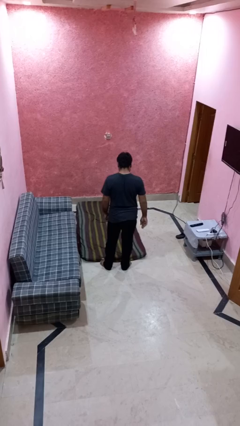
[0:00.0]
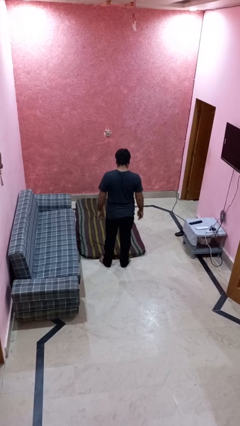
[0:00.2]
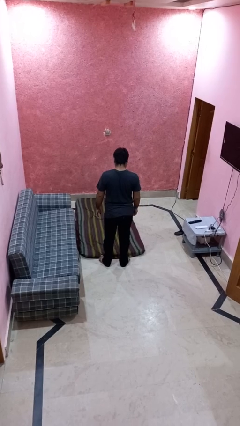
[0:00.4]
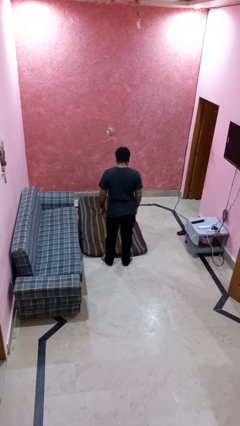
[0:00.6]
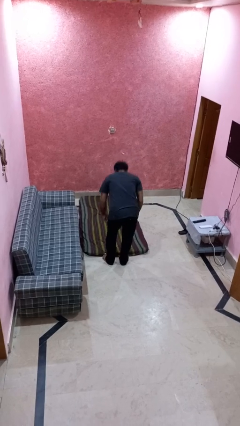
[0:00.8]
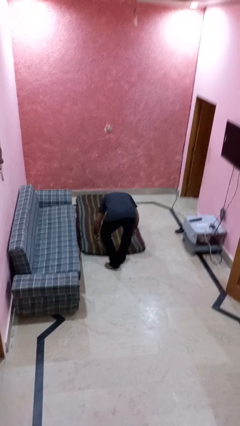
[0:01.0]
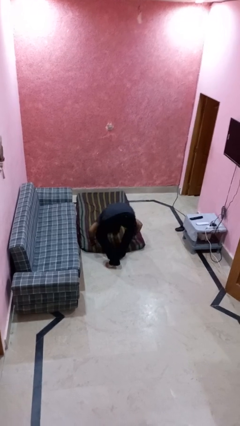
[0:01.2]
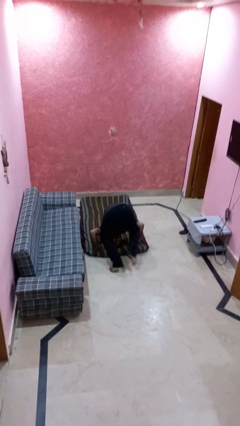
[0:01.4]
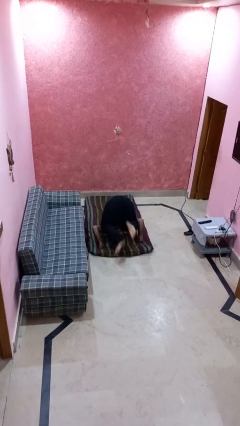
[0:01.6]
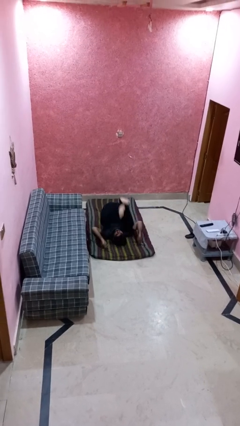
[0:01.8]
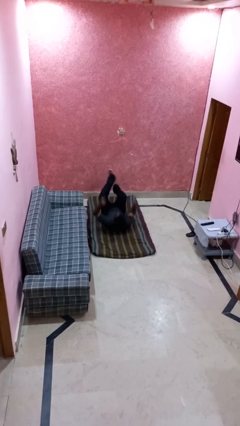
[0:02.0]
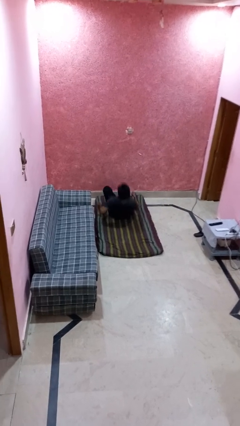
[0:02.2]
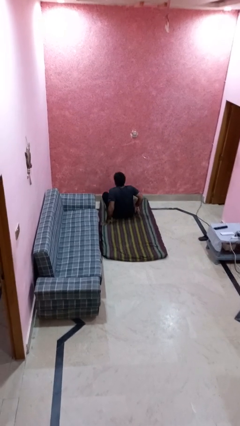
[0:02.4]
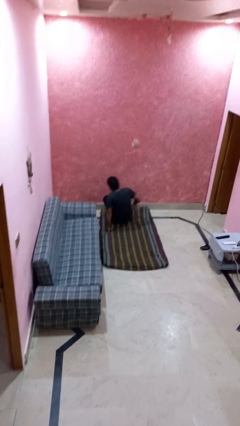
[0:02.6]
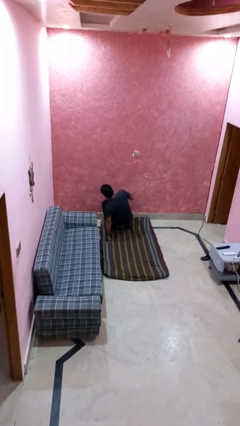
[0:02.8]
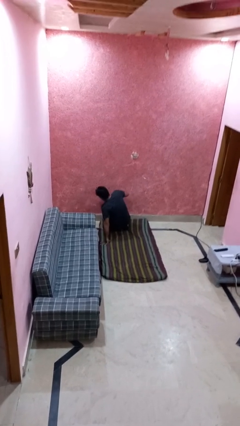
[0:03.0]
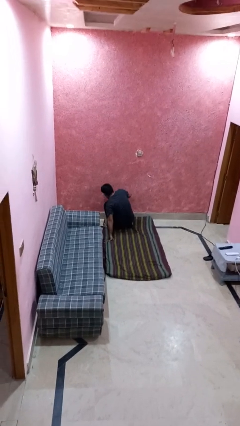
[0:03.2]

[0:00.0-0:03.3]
person somersaults

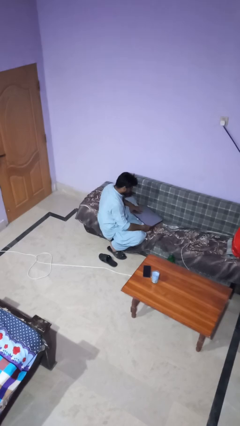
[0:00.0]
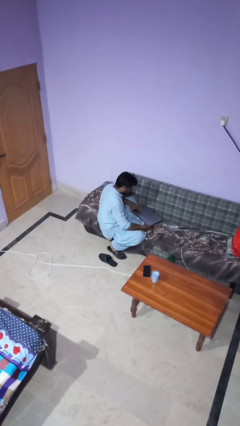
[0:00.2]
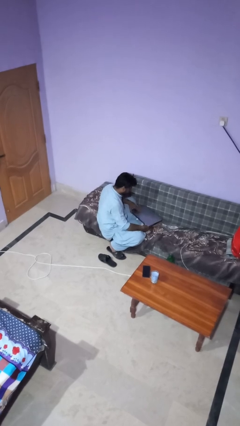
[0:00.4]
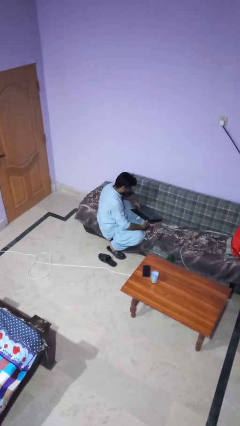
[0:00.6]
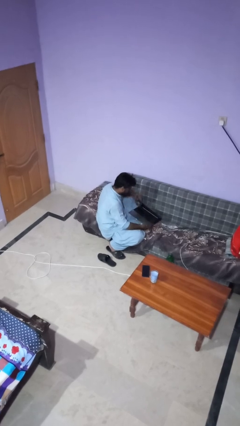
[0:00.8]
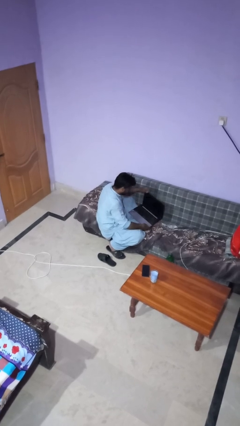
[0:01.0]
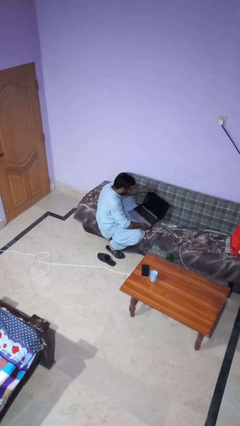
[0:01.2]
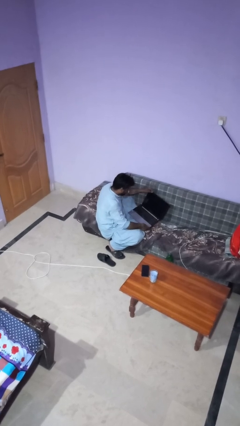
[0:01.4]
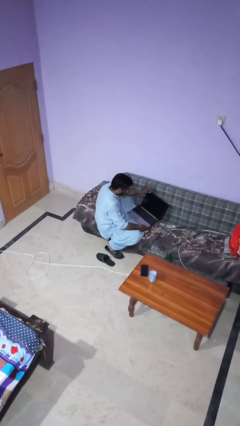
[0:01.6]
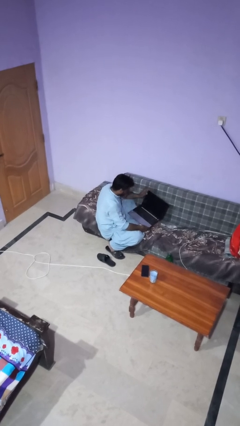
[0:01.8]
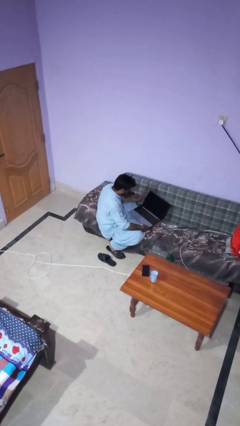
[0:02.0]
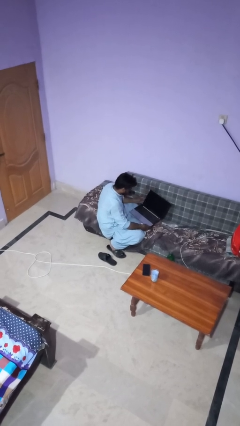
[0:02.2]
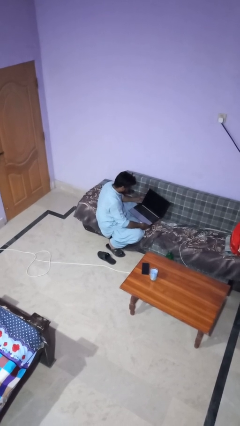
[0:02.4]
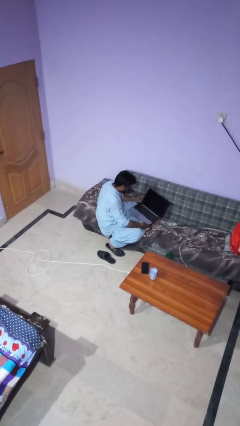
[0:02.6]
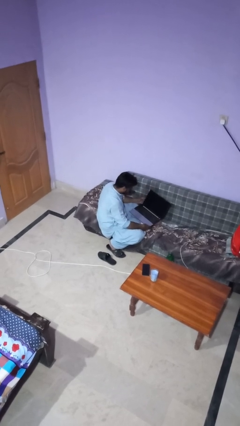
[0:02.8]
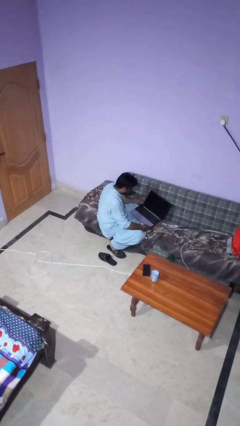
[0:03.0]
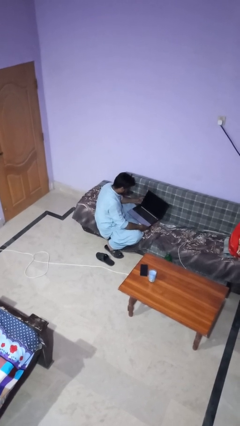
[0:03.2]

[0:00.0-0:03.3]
person opens laptop

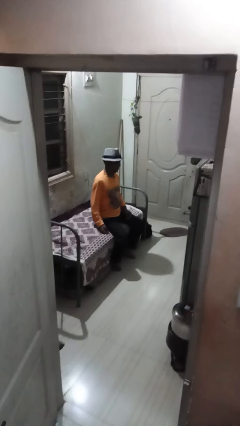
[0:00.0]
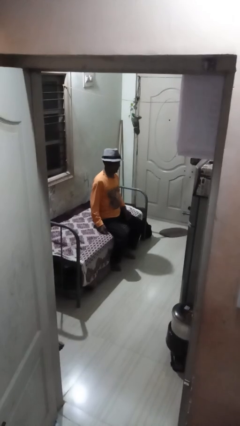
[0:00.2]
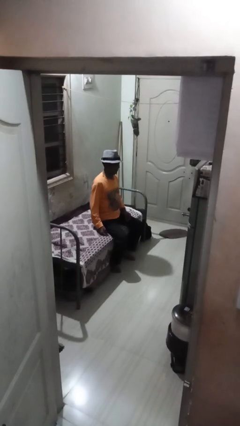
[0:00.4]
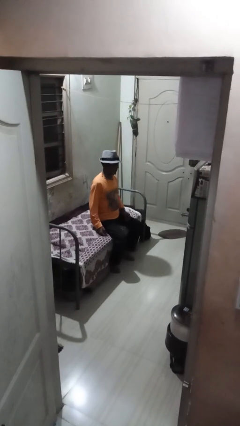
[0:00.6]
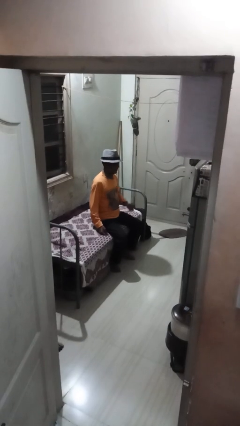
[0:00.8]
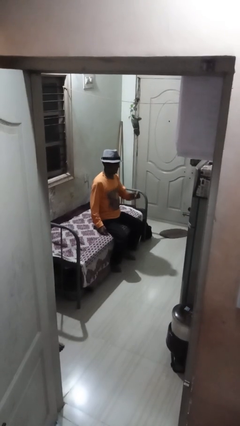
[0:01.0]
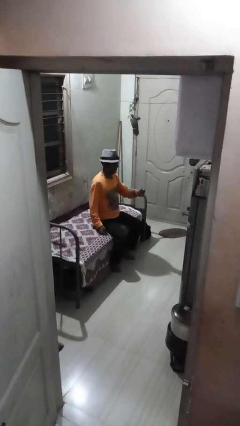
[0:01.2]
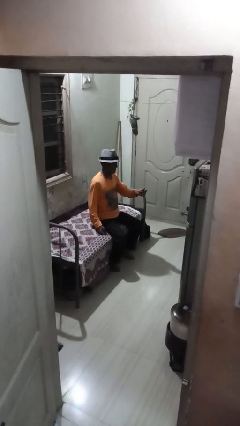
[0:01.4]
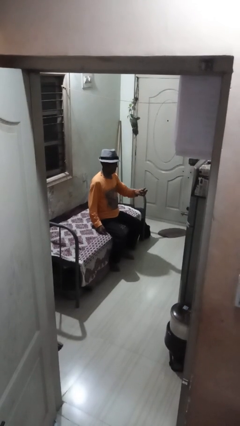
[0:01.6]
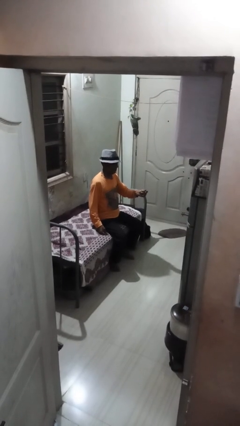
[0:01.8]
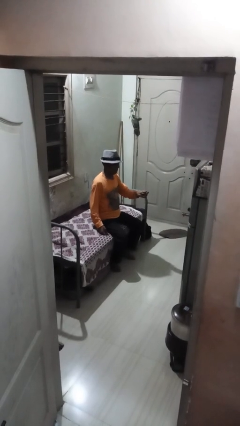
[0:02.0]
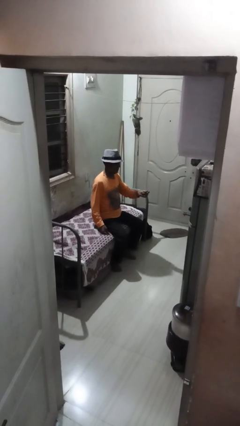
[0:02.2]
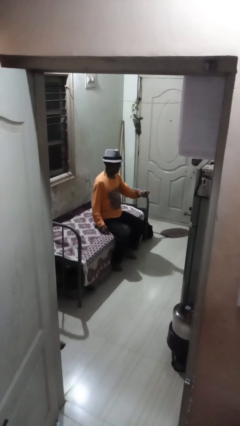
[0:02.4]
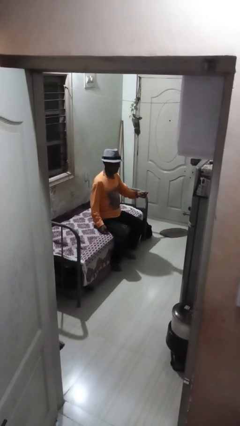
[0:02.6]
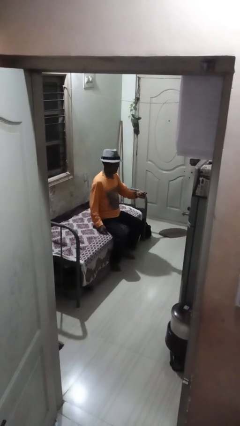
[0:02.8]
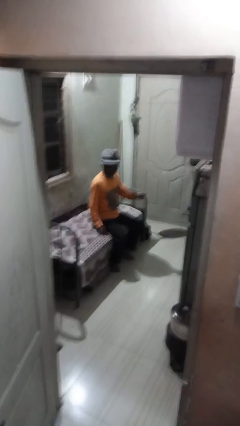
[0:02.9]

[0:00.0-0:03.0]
person snaps fingers

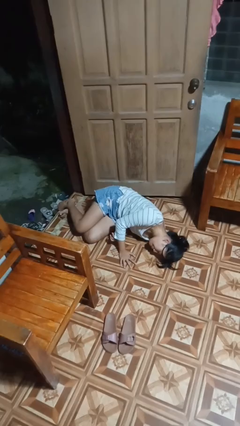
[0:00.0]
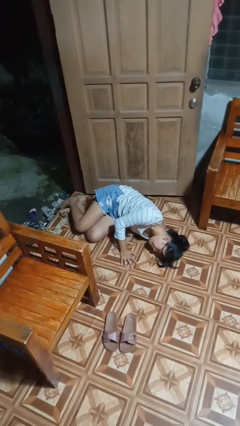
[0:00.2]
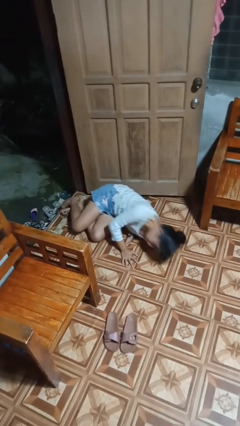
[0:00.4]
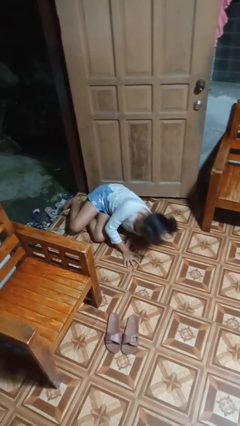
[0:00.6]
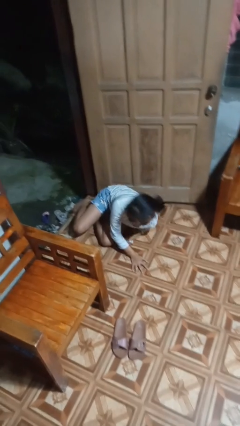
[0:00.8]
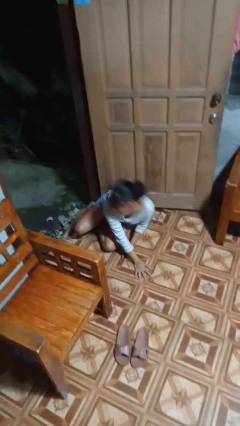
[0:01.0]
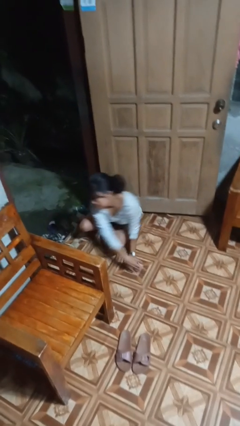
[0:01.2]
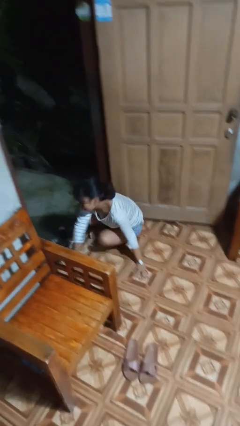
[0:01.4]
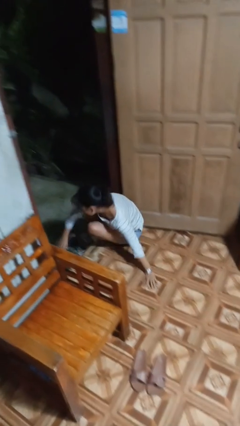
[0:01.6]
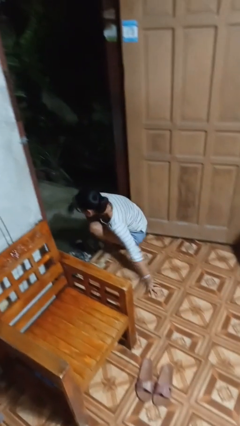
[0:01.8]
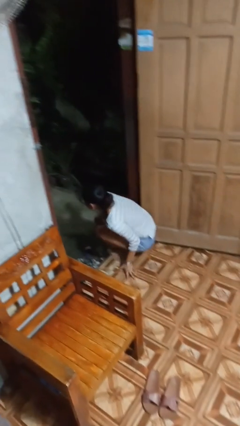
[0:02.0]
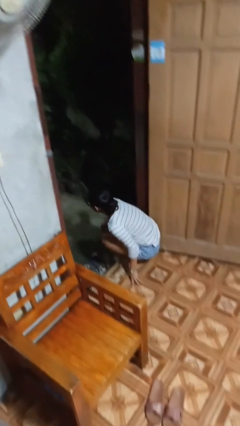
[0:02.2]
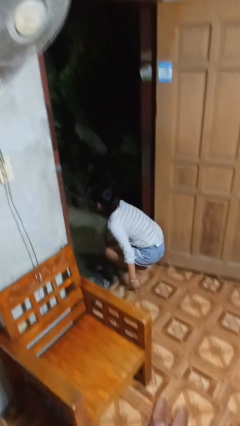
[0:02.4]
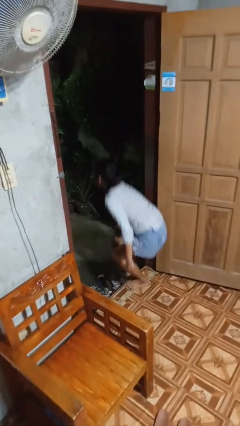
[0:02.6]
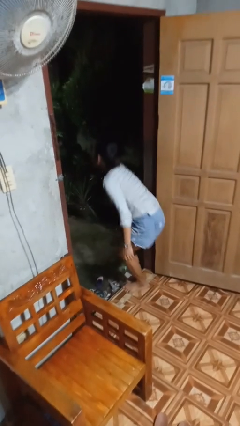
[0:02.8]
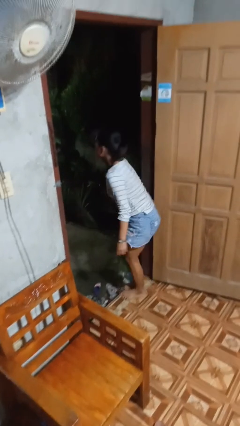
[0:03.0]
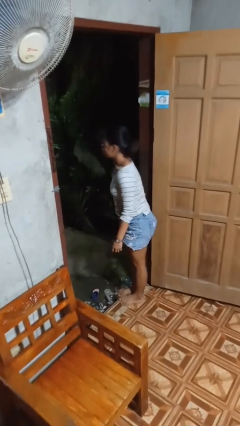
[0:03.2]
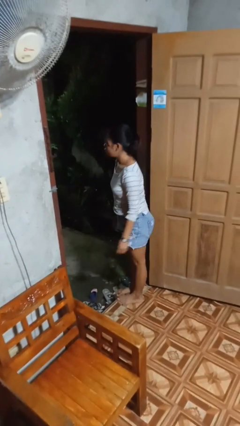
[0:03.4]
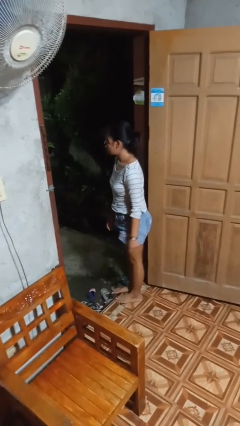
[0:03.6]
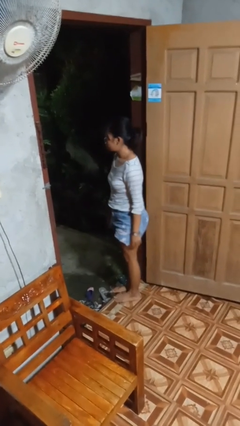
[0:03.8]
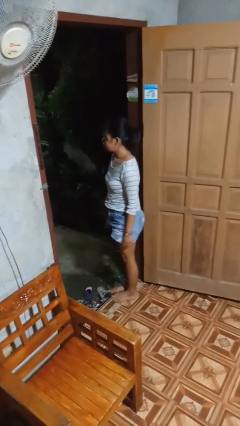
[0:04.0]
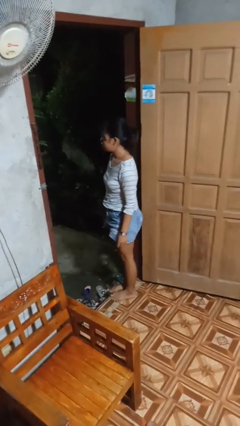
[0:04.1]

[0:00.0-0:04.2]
person stands up from floor

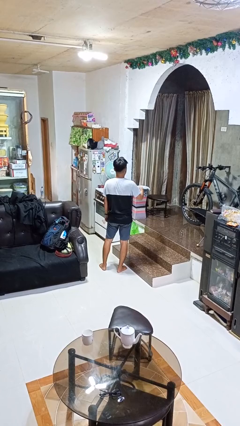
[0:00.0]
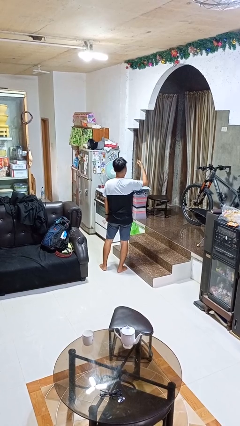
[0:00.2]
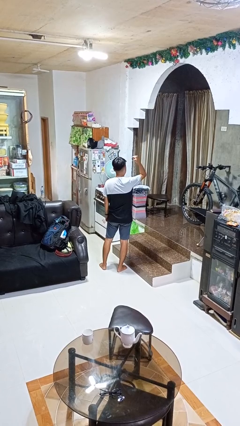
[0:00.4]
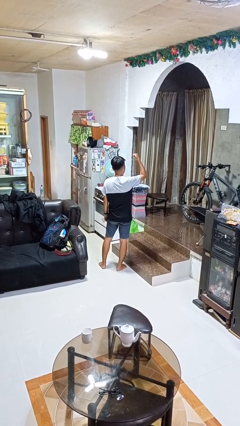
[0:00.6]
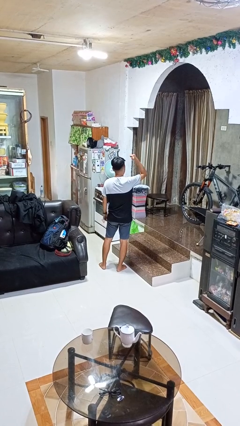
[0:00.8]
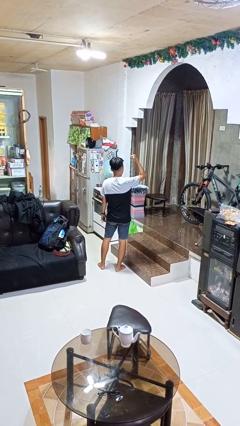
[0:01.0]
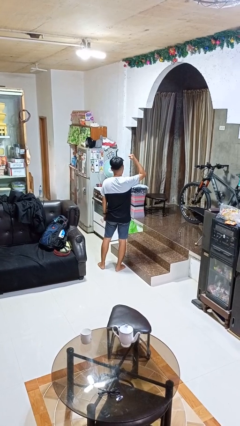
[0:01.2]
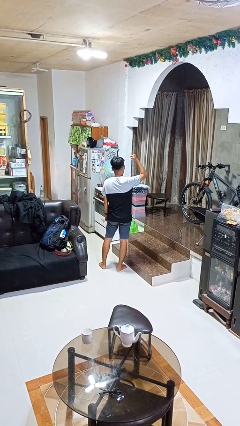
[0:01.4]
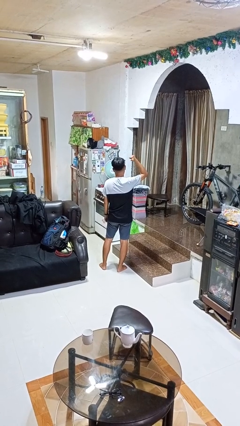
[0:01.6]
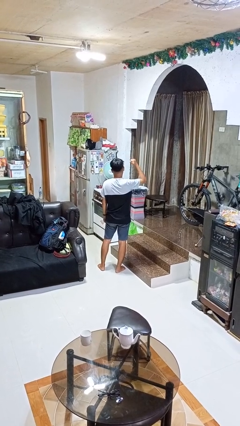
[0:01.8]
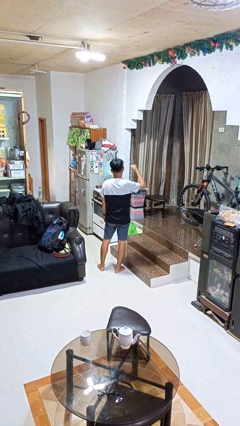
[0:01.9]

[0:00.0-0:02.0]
person gestures behind me

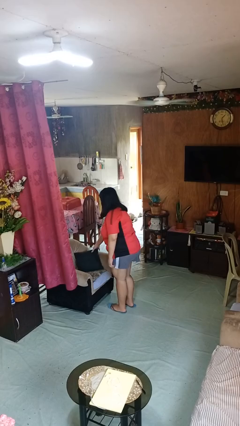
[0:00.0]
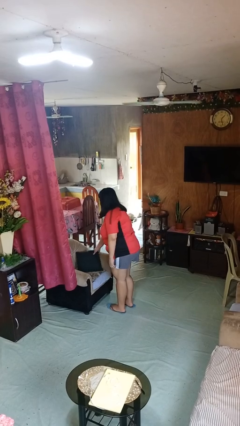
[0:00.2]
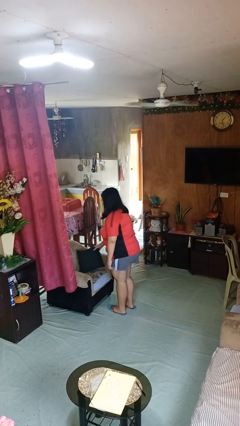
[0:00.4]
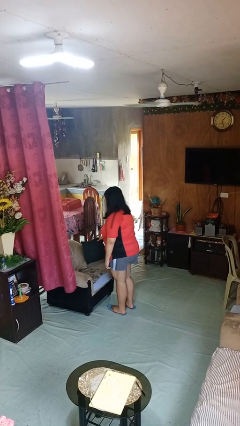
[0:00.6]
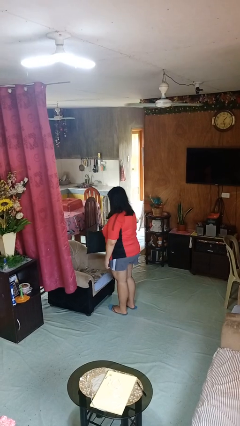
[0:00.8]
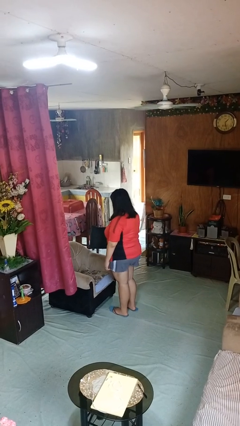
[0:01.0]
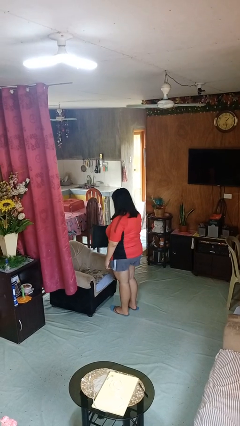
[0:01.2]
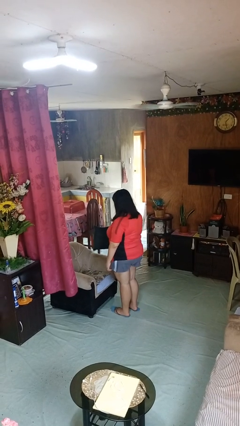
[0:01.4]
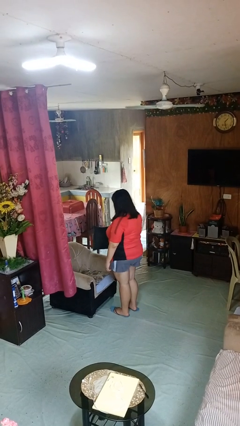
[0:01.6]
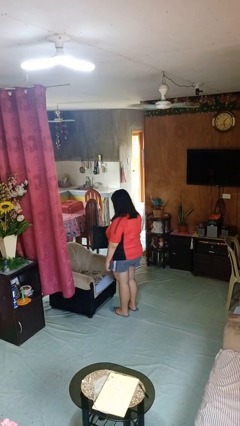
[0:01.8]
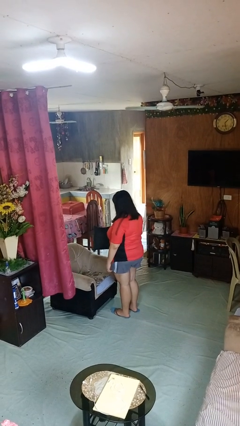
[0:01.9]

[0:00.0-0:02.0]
person picks up object from couch
